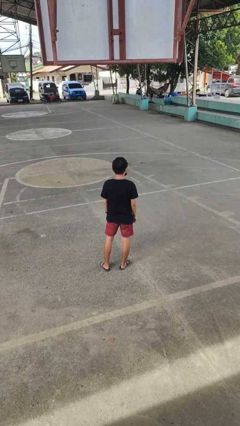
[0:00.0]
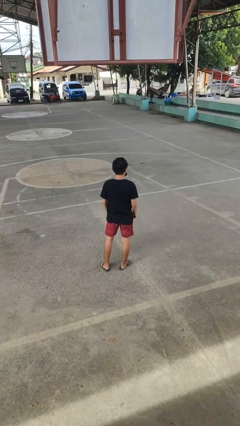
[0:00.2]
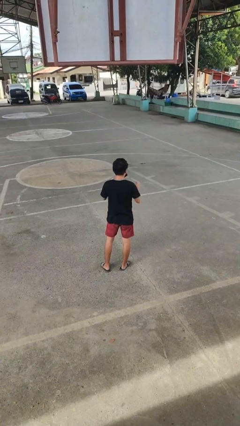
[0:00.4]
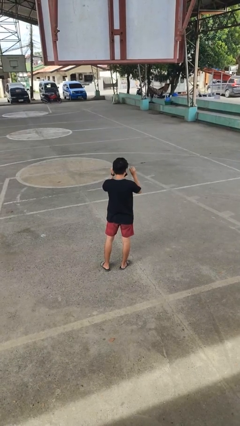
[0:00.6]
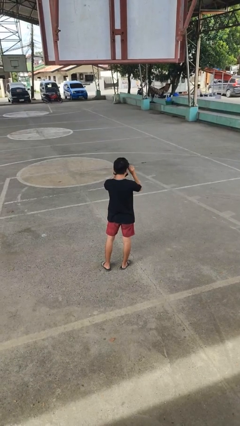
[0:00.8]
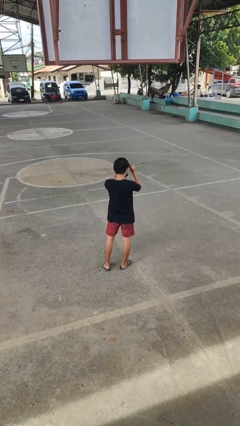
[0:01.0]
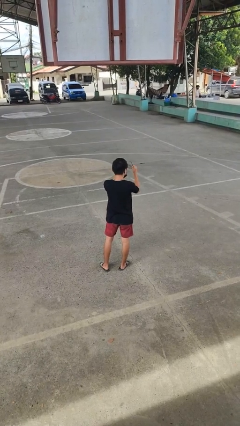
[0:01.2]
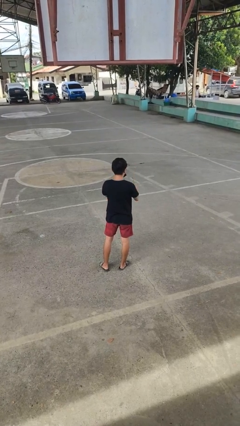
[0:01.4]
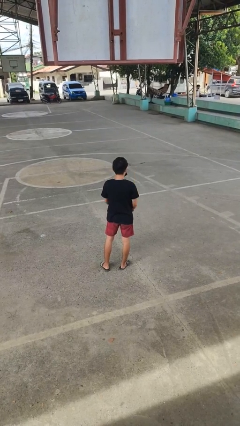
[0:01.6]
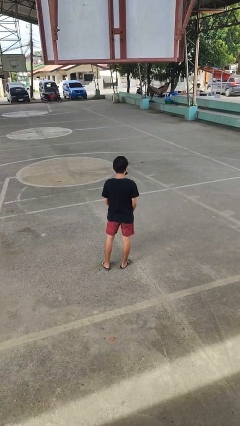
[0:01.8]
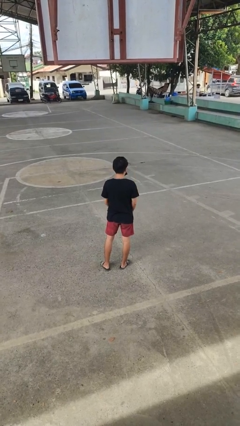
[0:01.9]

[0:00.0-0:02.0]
person takes off glasses

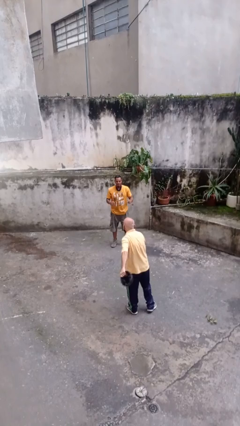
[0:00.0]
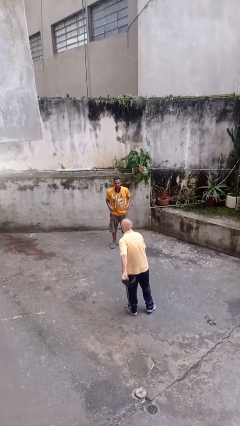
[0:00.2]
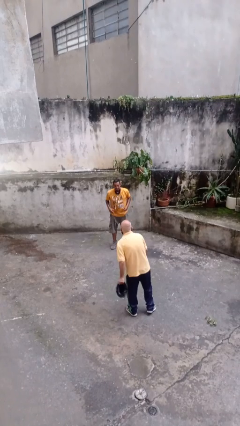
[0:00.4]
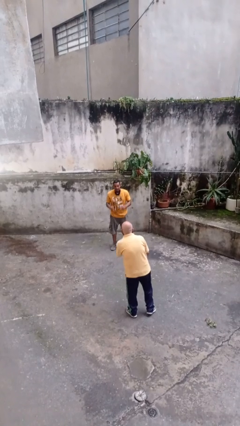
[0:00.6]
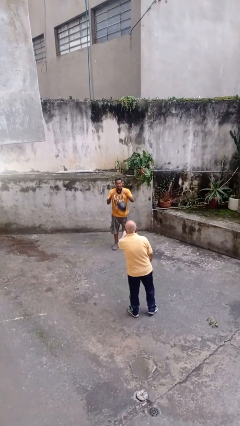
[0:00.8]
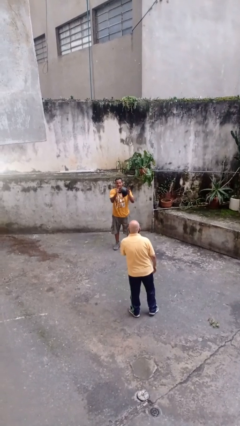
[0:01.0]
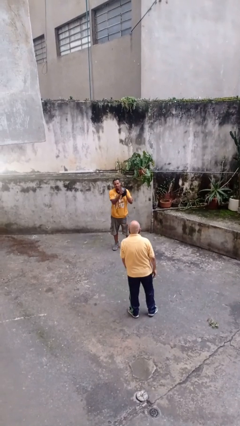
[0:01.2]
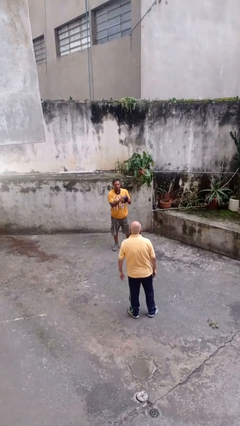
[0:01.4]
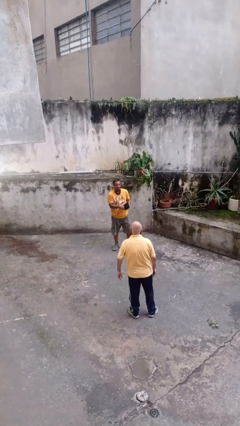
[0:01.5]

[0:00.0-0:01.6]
person catches object from person

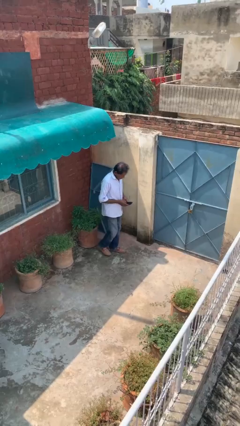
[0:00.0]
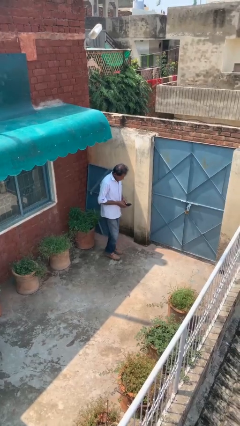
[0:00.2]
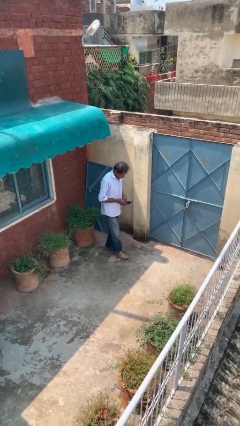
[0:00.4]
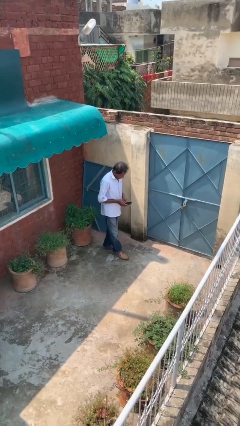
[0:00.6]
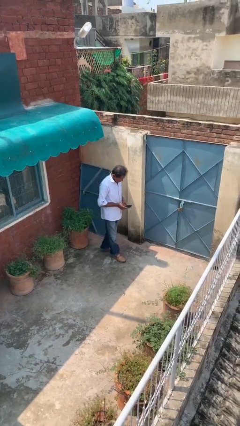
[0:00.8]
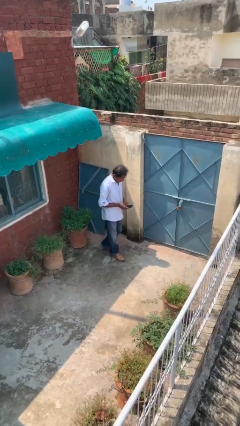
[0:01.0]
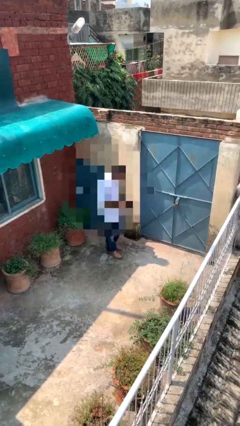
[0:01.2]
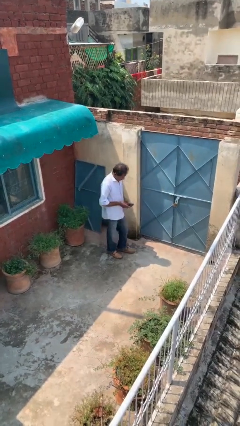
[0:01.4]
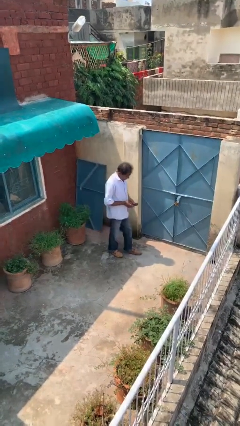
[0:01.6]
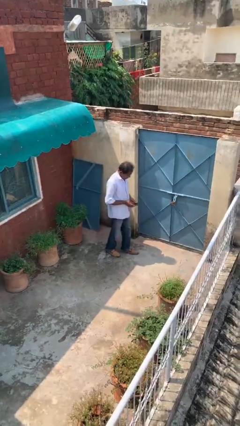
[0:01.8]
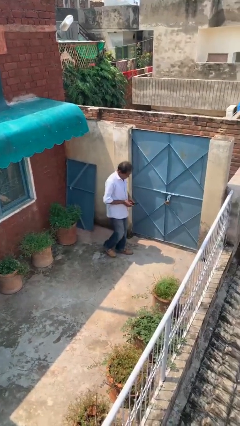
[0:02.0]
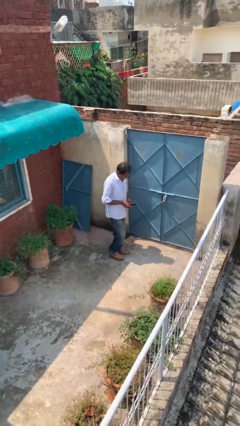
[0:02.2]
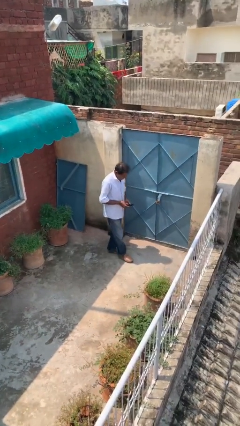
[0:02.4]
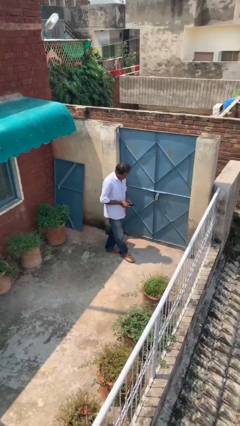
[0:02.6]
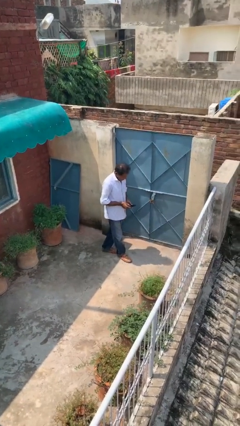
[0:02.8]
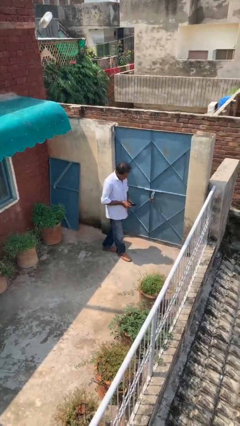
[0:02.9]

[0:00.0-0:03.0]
person texts on phone

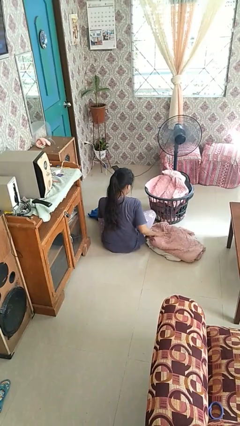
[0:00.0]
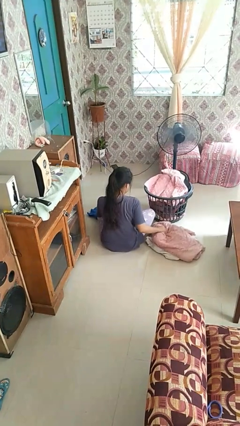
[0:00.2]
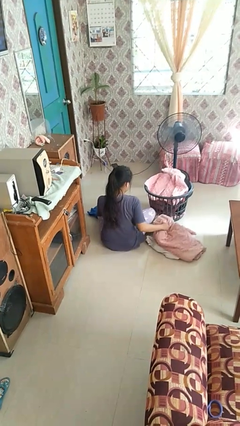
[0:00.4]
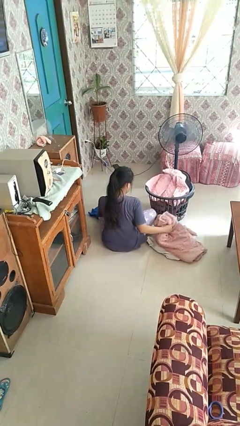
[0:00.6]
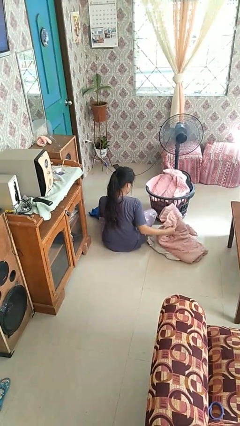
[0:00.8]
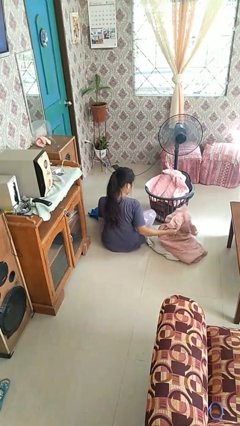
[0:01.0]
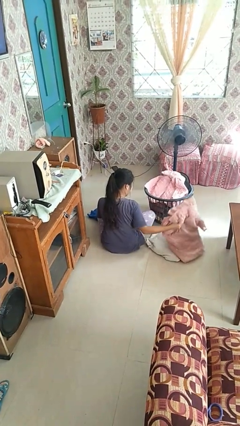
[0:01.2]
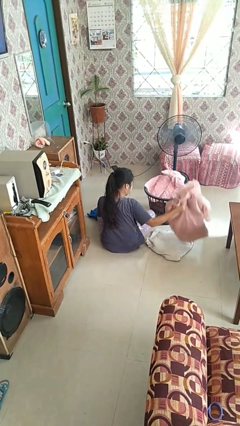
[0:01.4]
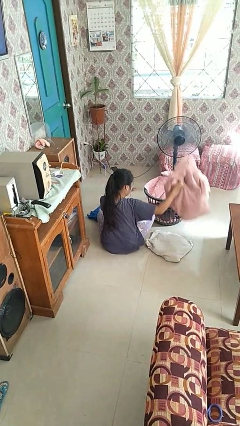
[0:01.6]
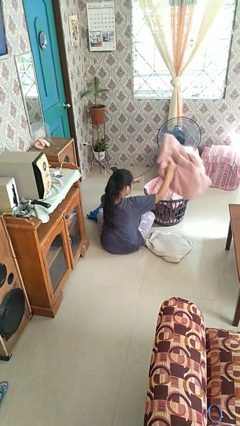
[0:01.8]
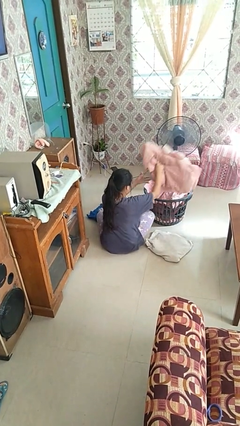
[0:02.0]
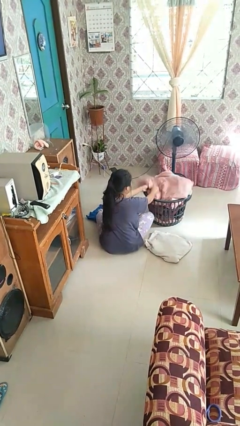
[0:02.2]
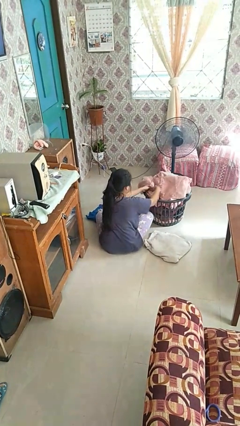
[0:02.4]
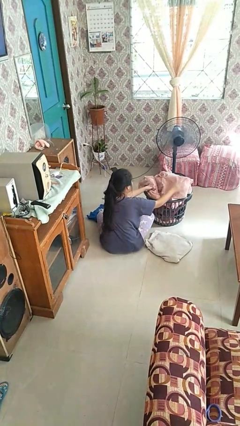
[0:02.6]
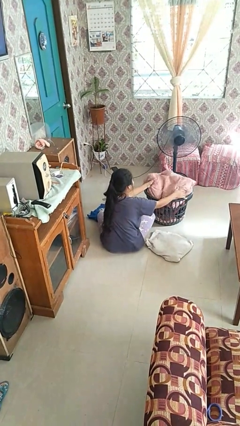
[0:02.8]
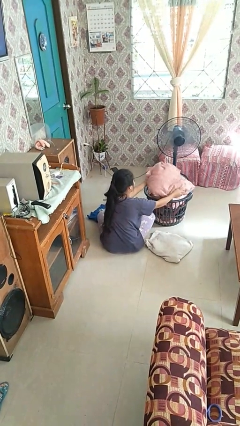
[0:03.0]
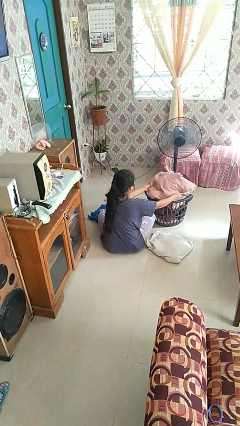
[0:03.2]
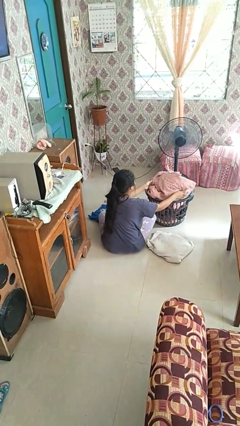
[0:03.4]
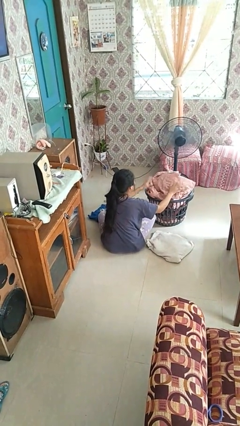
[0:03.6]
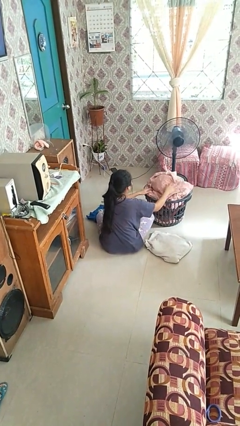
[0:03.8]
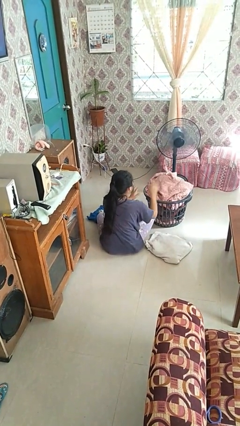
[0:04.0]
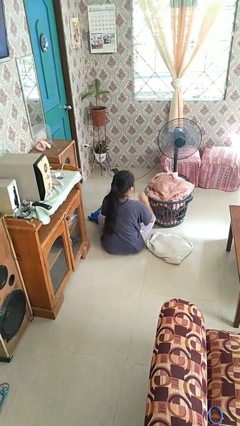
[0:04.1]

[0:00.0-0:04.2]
person puts object into basket

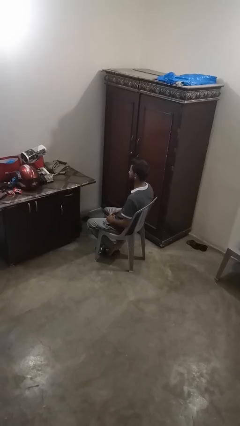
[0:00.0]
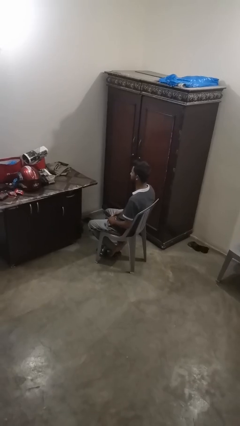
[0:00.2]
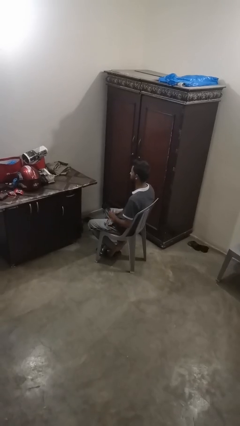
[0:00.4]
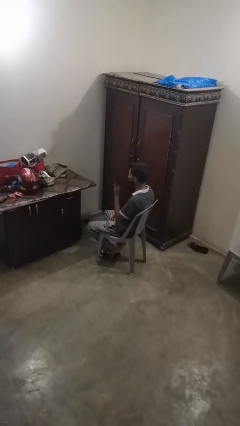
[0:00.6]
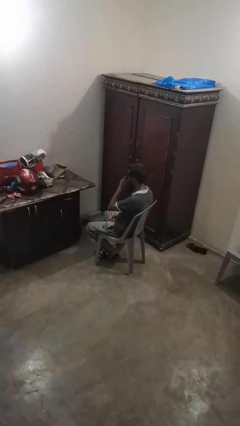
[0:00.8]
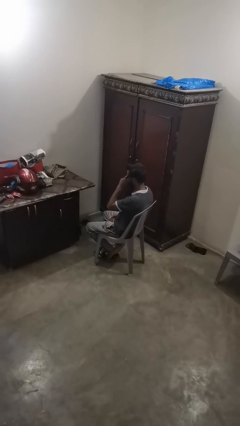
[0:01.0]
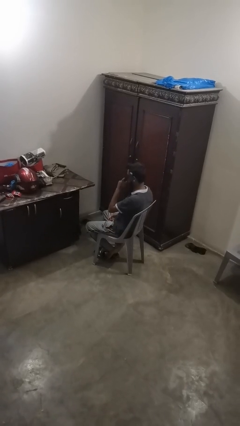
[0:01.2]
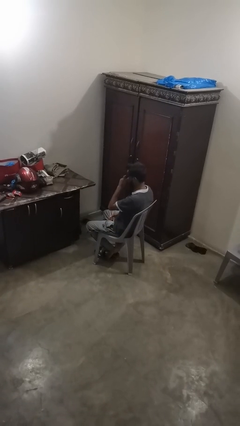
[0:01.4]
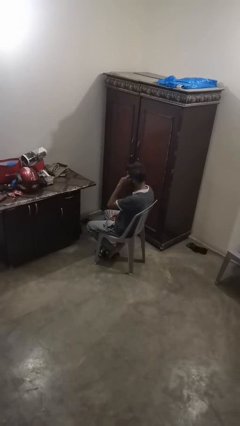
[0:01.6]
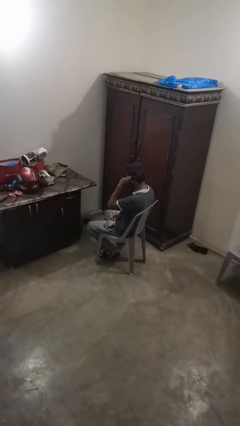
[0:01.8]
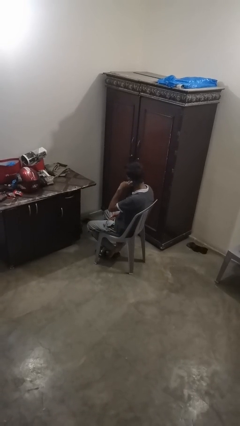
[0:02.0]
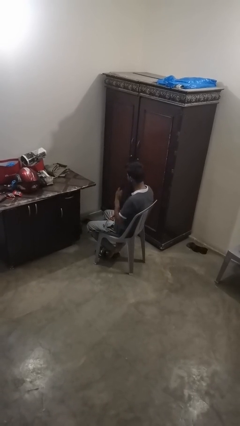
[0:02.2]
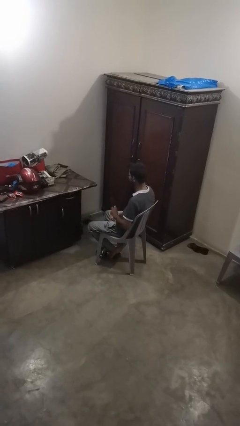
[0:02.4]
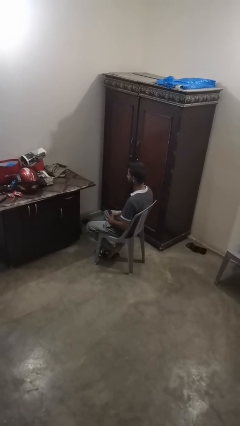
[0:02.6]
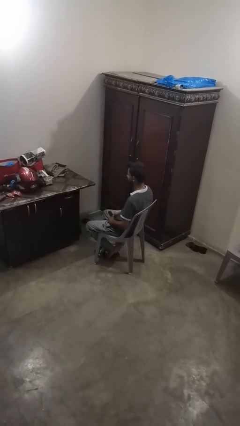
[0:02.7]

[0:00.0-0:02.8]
person brushes hair

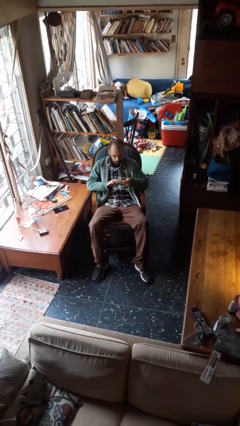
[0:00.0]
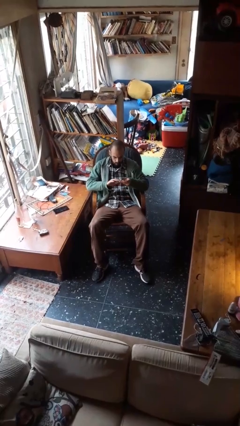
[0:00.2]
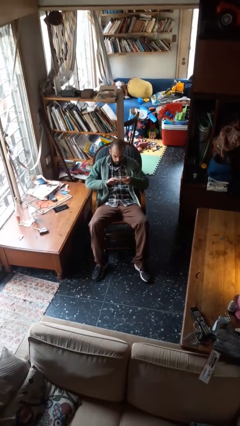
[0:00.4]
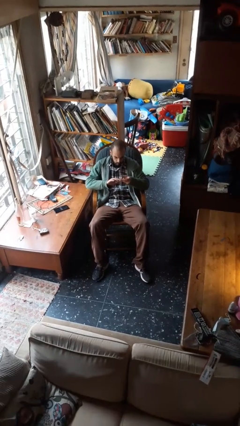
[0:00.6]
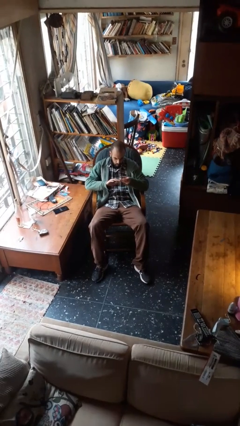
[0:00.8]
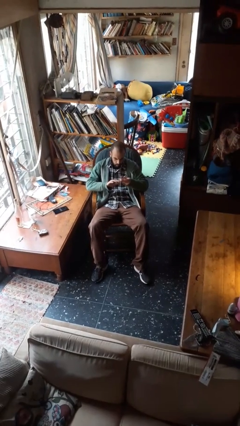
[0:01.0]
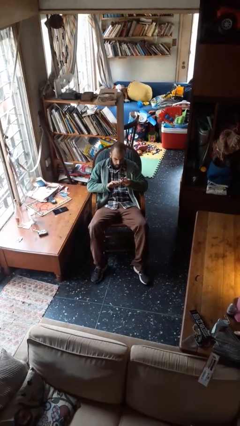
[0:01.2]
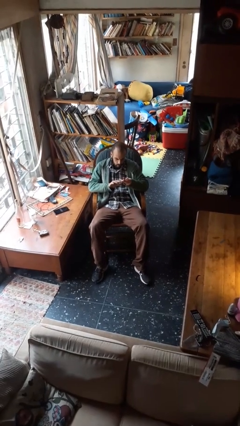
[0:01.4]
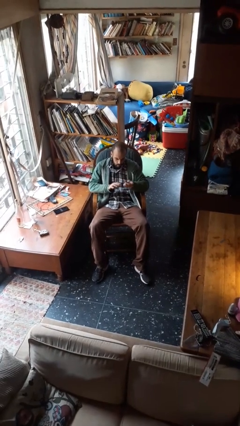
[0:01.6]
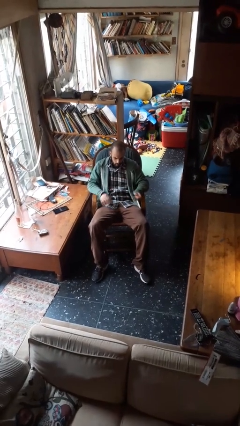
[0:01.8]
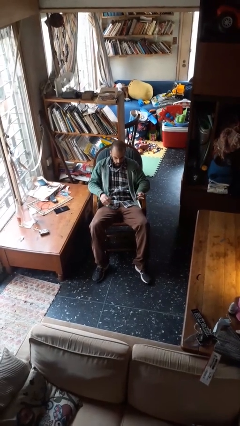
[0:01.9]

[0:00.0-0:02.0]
person clips fingernails

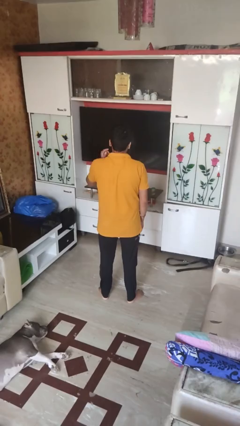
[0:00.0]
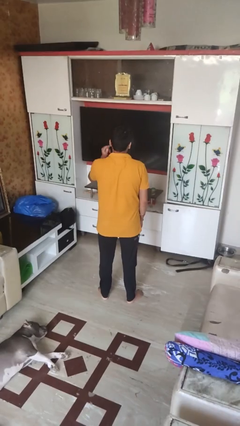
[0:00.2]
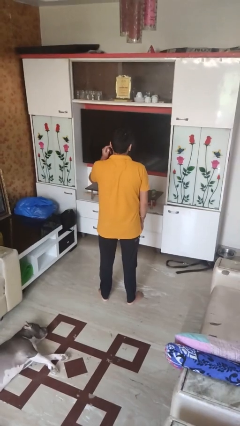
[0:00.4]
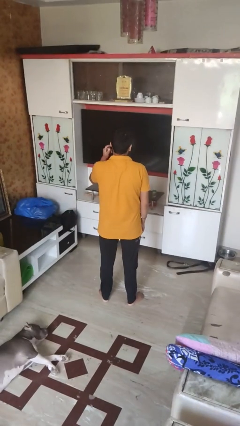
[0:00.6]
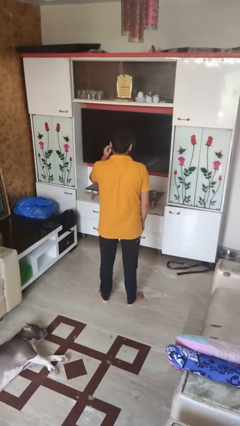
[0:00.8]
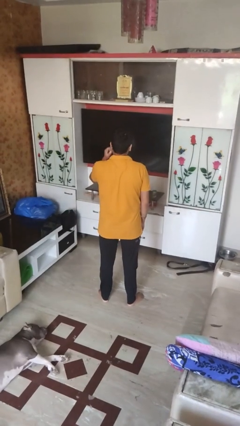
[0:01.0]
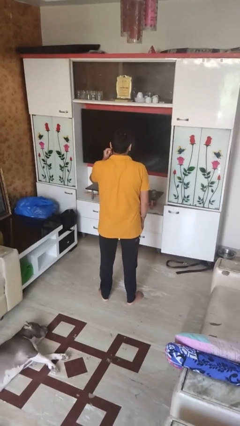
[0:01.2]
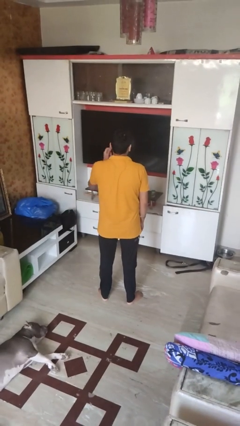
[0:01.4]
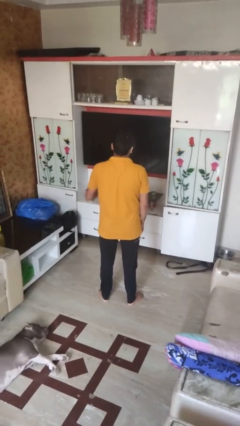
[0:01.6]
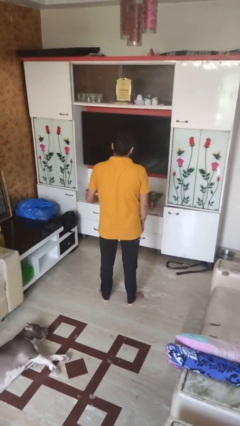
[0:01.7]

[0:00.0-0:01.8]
person touches earlobe
